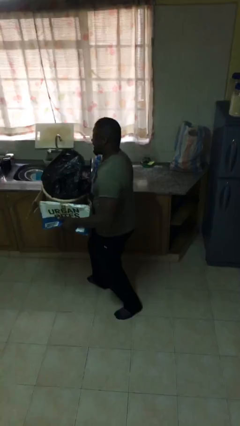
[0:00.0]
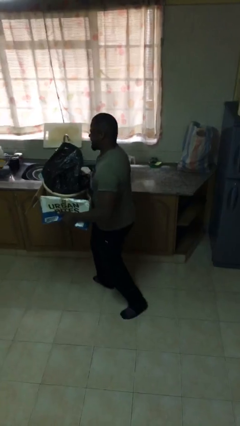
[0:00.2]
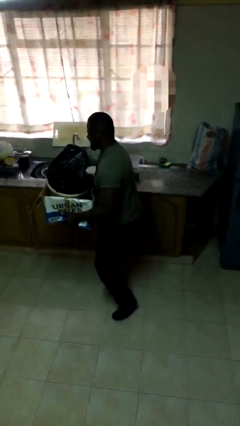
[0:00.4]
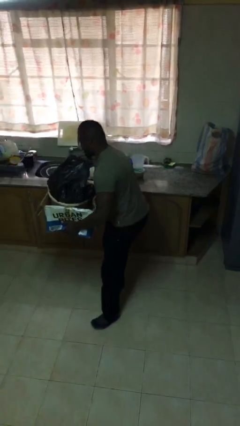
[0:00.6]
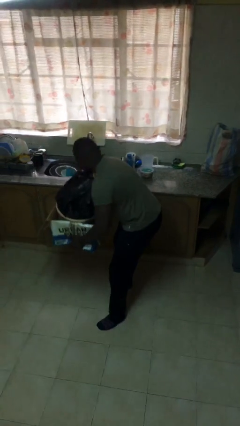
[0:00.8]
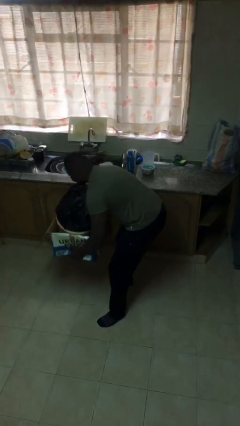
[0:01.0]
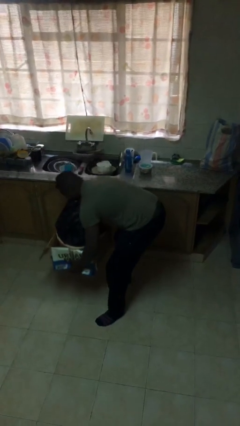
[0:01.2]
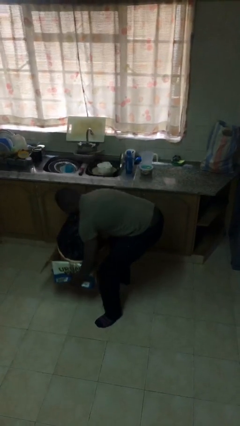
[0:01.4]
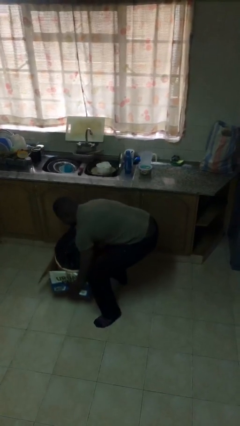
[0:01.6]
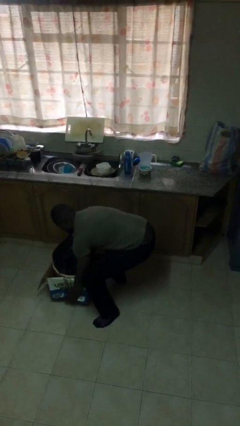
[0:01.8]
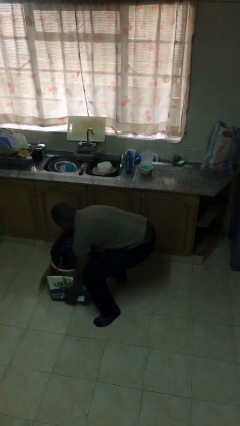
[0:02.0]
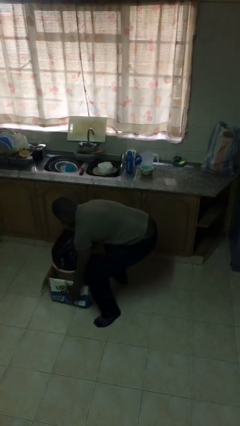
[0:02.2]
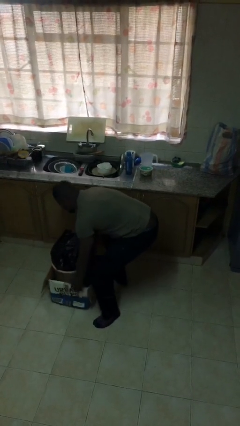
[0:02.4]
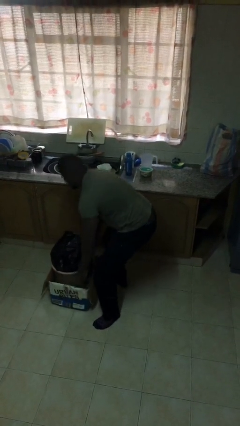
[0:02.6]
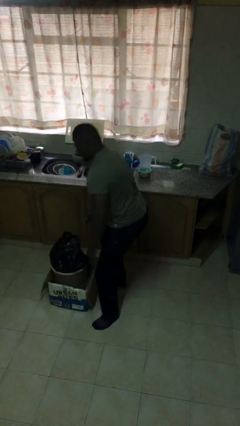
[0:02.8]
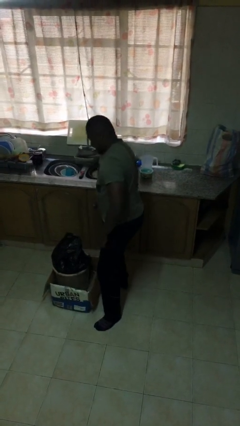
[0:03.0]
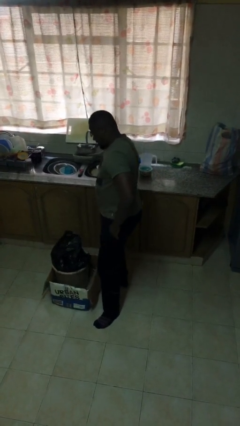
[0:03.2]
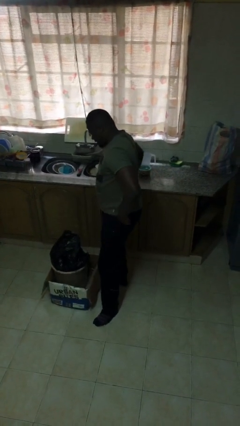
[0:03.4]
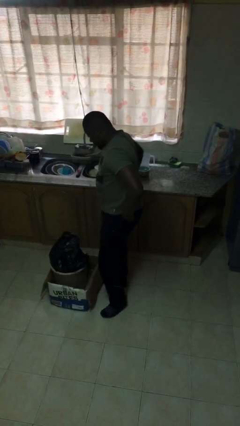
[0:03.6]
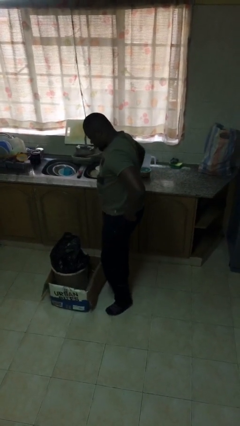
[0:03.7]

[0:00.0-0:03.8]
person puts down object on floor

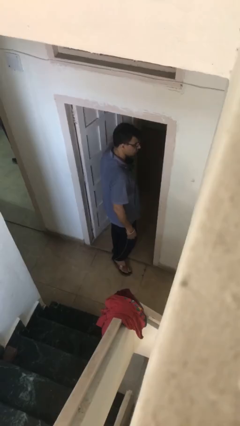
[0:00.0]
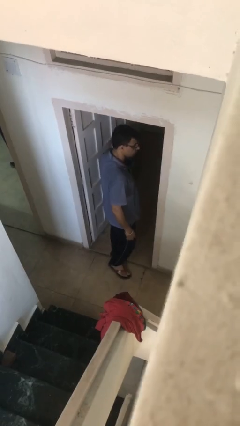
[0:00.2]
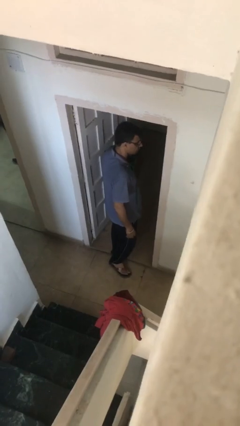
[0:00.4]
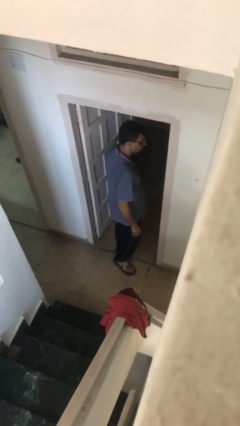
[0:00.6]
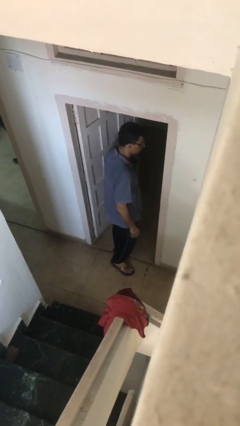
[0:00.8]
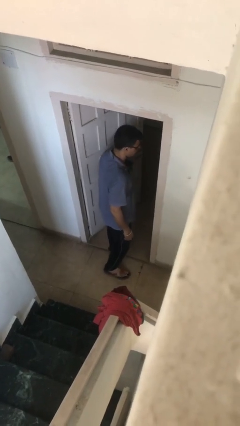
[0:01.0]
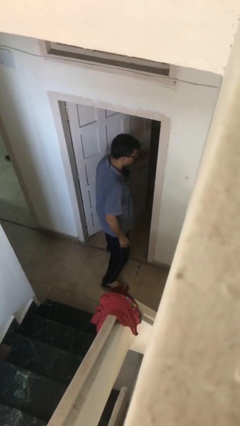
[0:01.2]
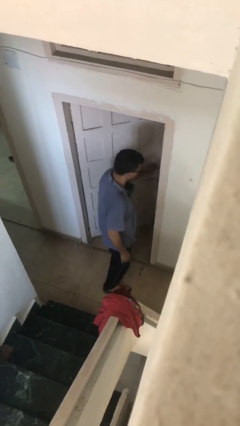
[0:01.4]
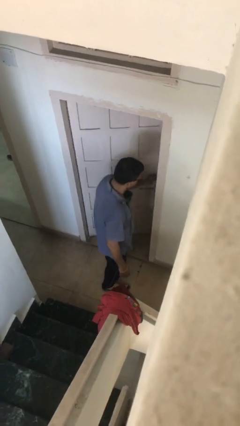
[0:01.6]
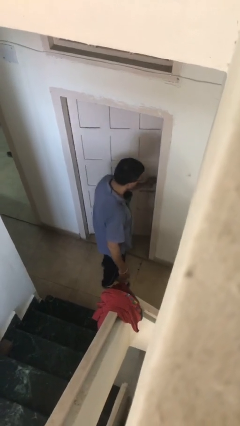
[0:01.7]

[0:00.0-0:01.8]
person closes facility door

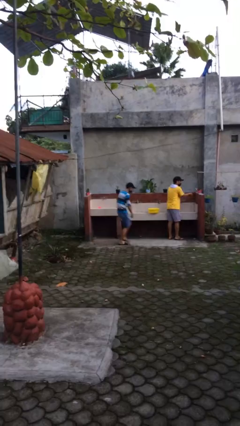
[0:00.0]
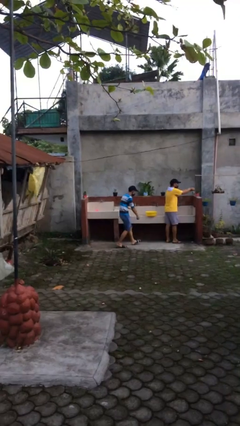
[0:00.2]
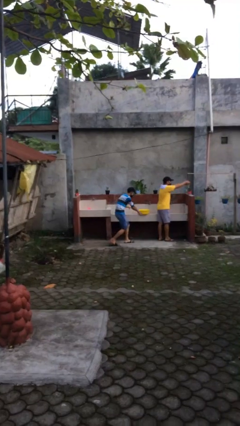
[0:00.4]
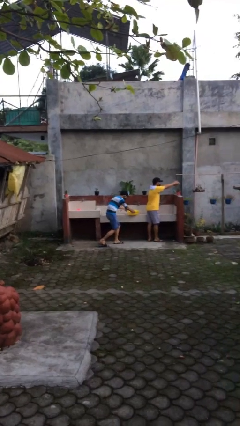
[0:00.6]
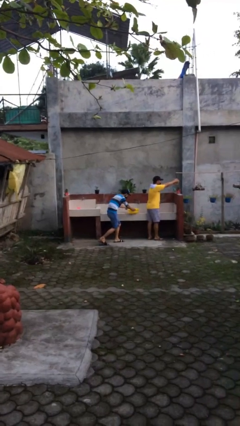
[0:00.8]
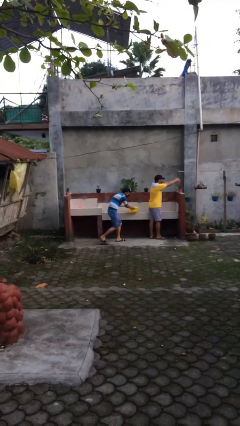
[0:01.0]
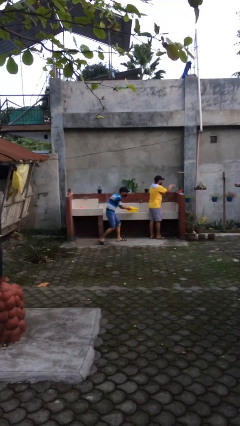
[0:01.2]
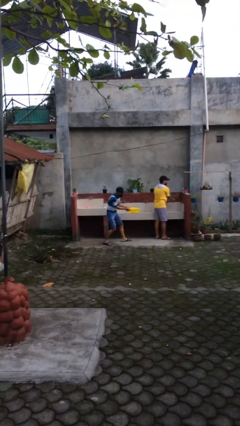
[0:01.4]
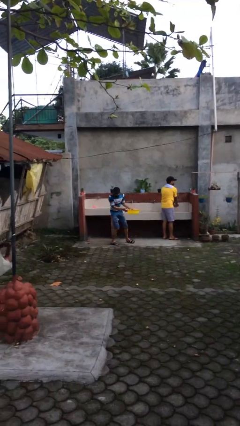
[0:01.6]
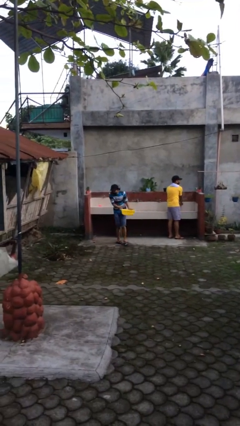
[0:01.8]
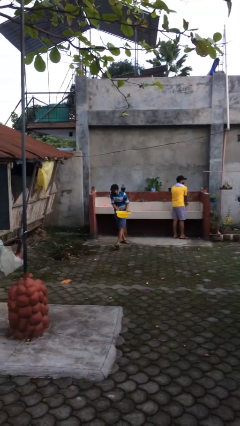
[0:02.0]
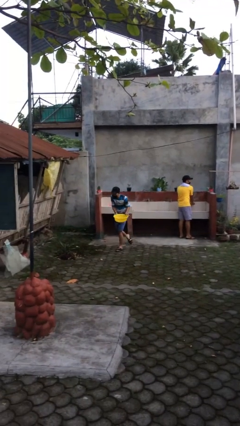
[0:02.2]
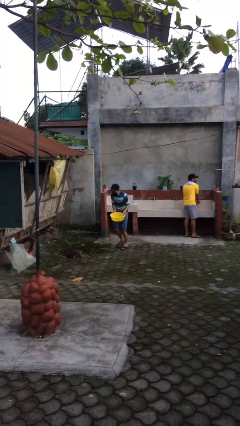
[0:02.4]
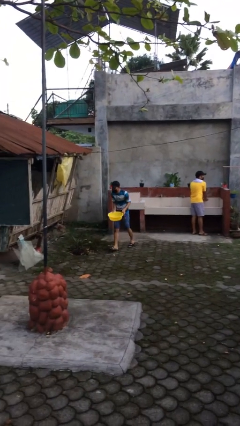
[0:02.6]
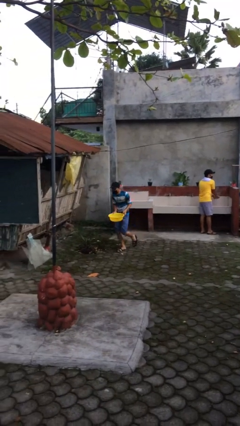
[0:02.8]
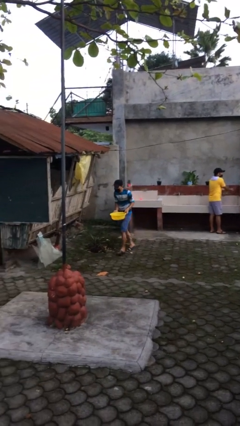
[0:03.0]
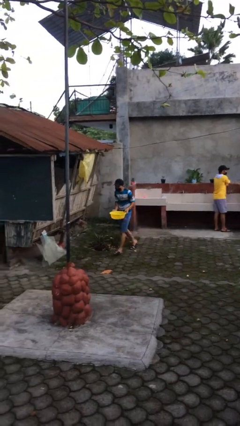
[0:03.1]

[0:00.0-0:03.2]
person steals object from person

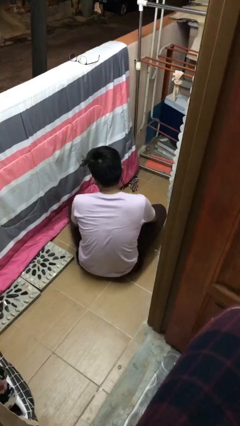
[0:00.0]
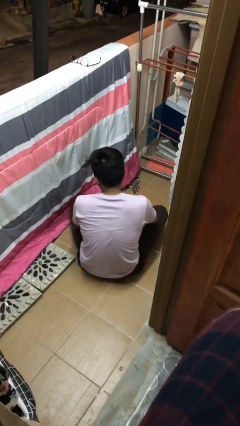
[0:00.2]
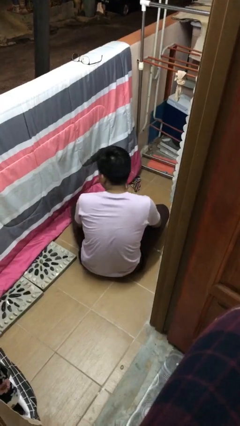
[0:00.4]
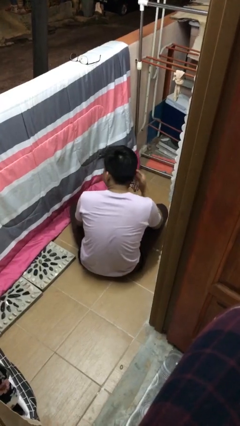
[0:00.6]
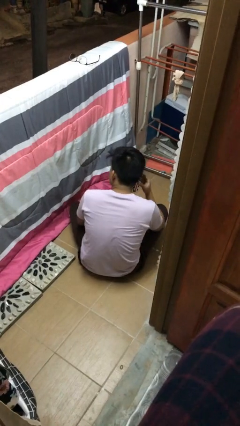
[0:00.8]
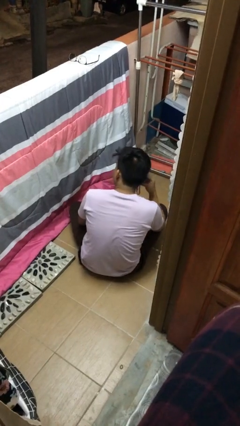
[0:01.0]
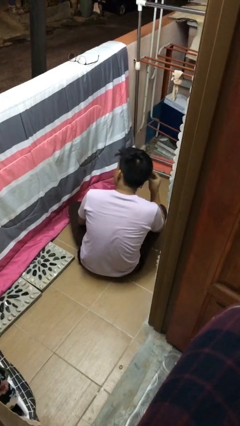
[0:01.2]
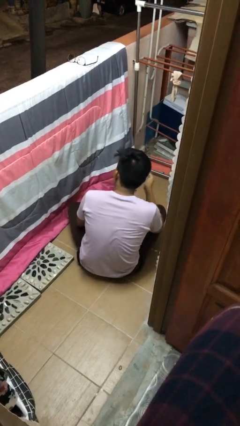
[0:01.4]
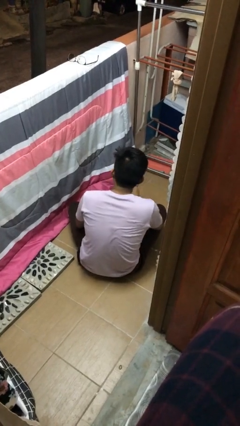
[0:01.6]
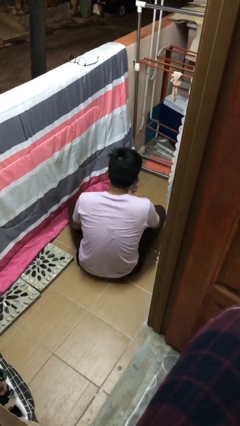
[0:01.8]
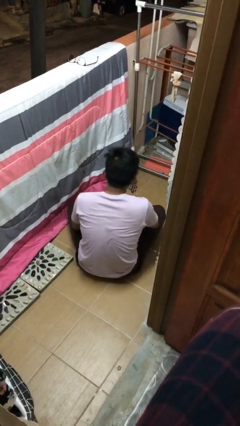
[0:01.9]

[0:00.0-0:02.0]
person takes off earrings

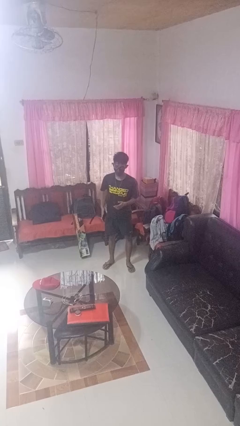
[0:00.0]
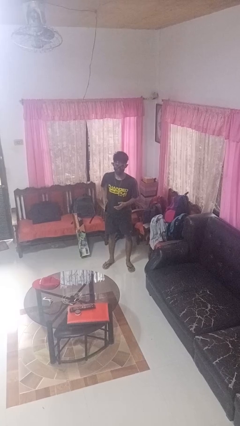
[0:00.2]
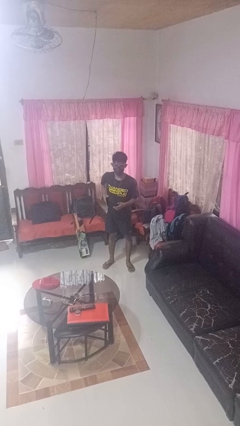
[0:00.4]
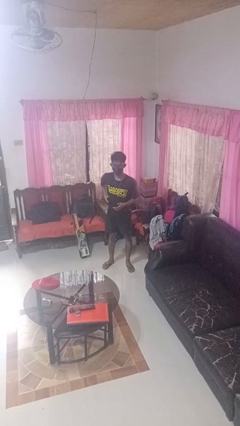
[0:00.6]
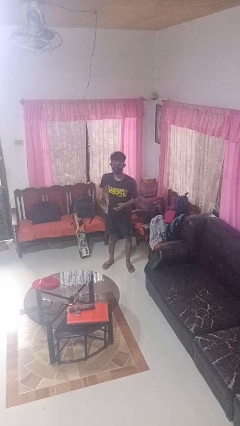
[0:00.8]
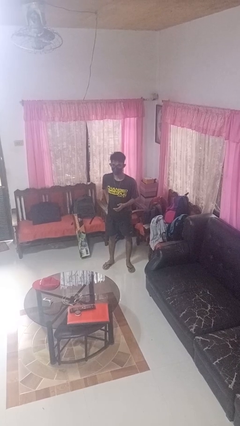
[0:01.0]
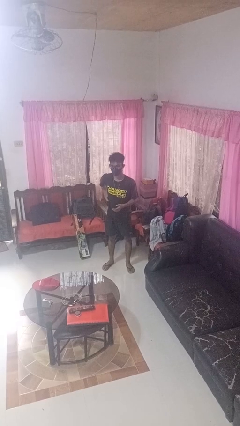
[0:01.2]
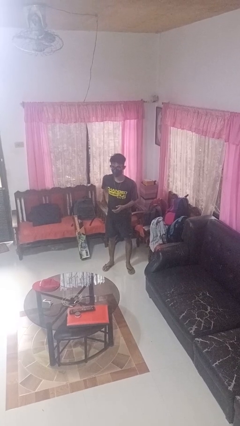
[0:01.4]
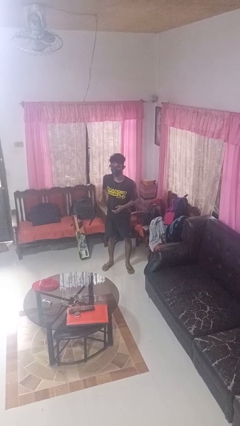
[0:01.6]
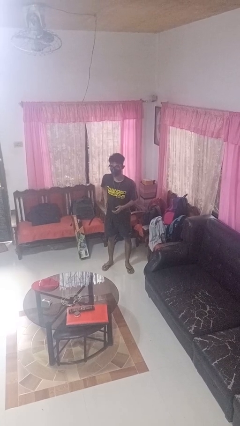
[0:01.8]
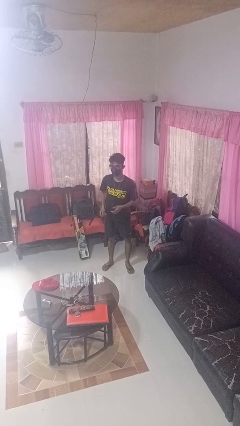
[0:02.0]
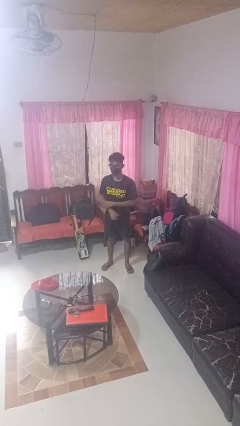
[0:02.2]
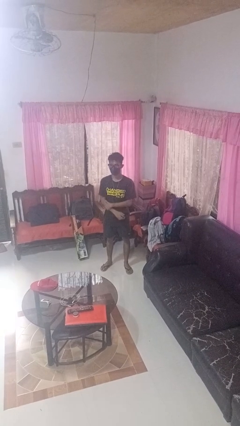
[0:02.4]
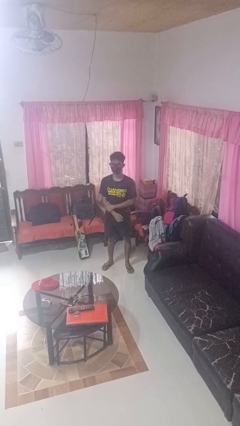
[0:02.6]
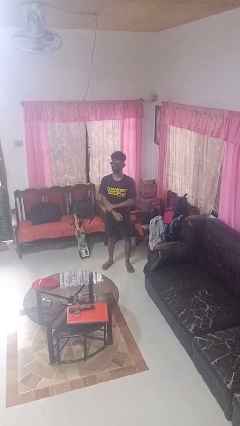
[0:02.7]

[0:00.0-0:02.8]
person puts phone into pocket

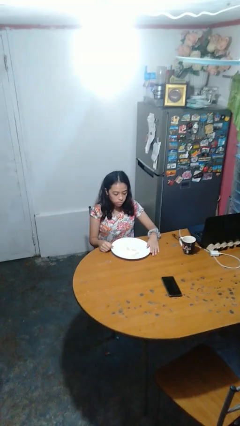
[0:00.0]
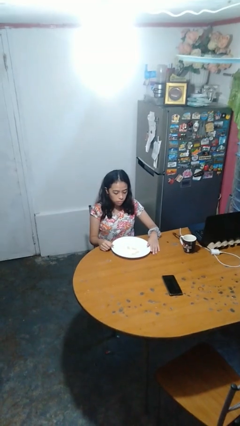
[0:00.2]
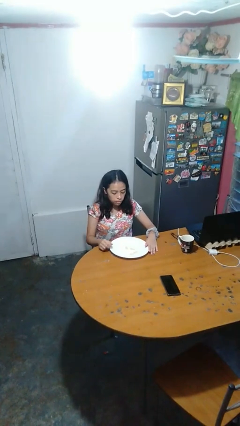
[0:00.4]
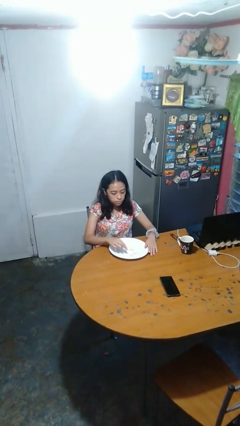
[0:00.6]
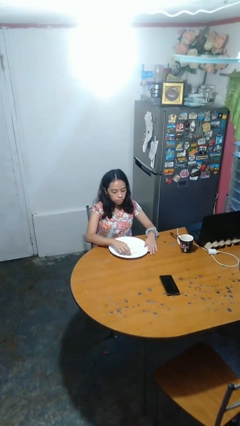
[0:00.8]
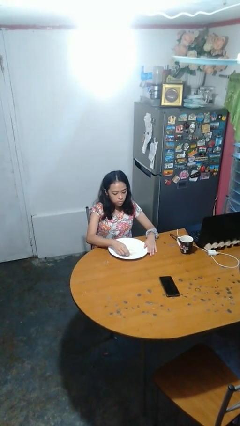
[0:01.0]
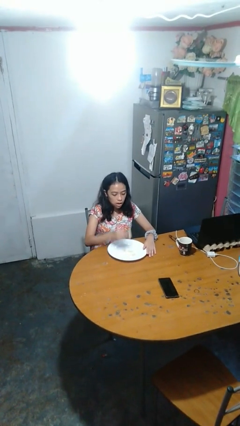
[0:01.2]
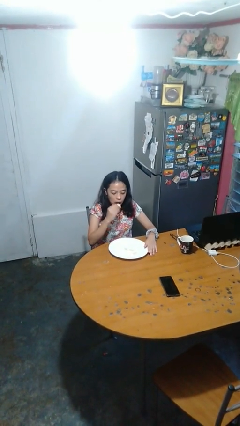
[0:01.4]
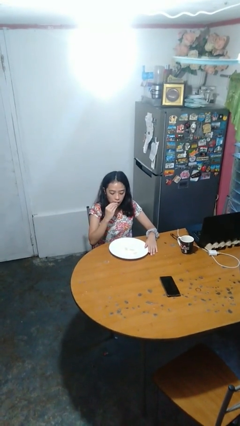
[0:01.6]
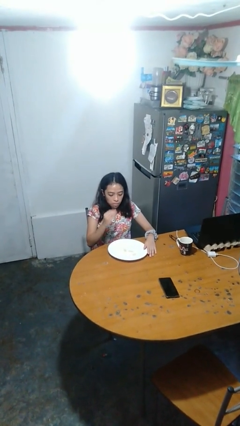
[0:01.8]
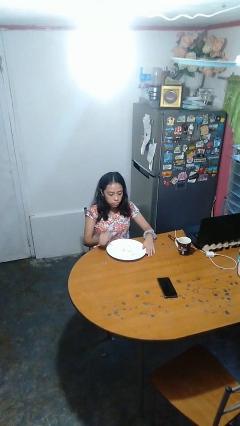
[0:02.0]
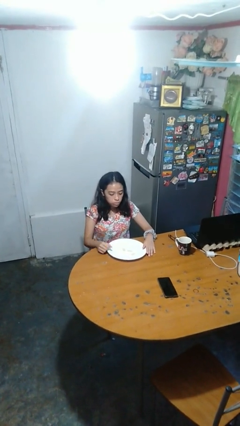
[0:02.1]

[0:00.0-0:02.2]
person eats with hands

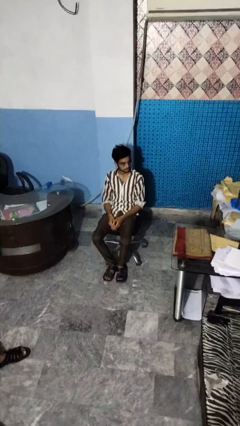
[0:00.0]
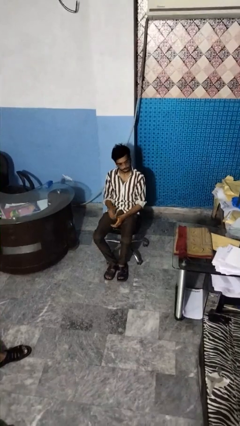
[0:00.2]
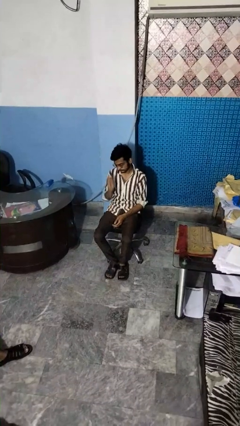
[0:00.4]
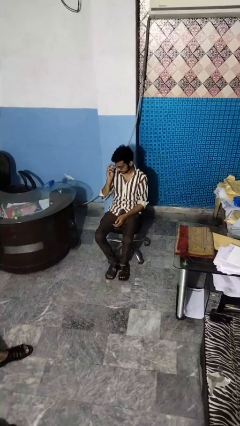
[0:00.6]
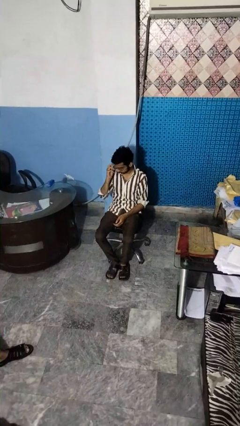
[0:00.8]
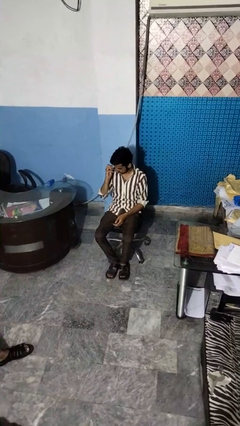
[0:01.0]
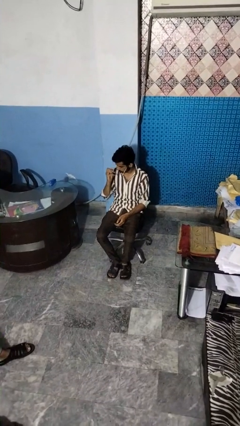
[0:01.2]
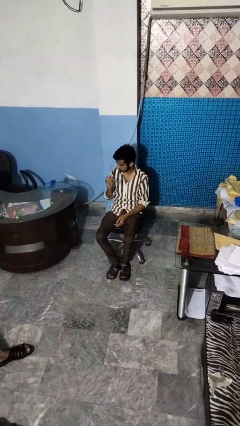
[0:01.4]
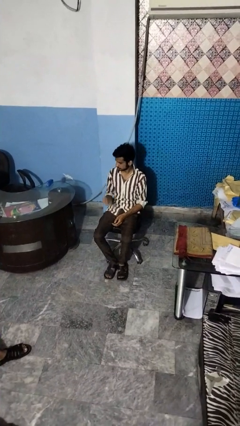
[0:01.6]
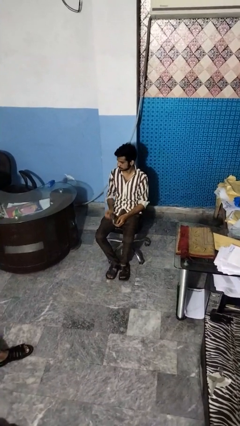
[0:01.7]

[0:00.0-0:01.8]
person takes off glasses
